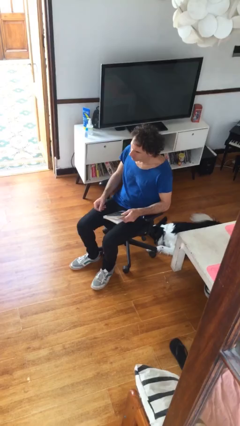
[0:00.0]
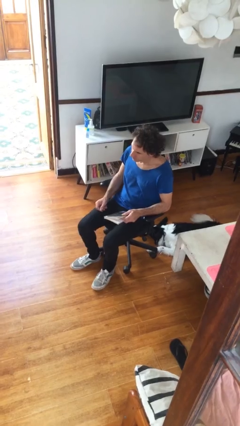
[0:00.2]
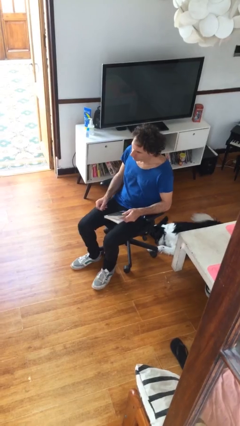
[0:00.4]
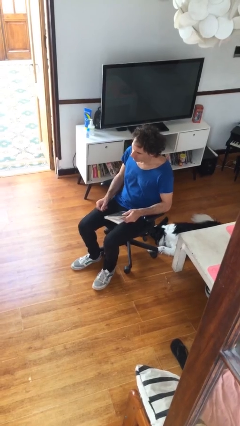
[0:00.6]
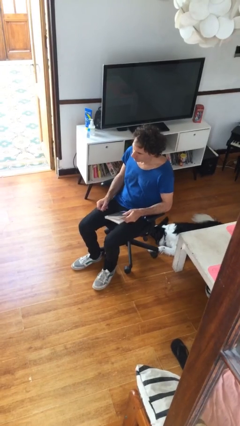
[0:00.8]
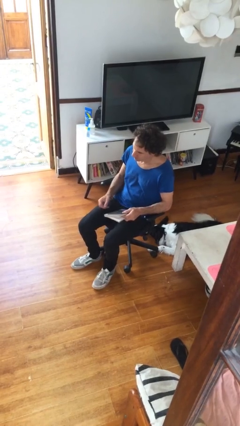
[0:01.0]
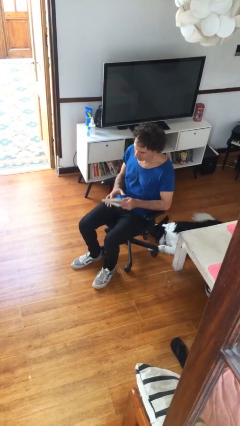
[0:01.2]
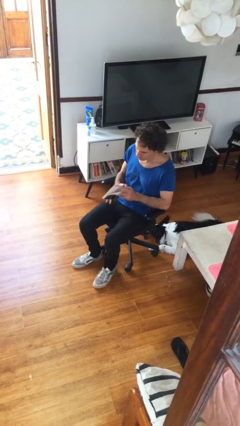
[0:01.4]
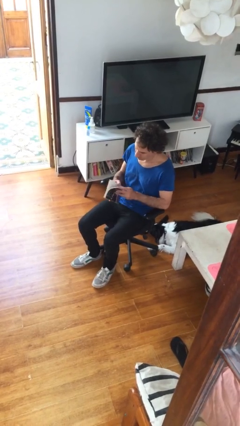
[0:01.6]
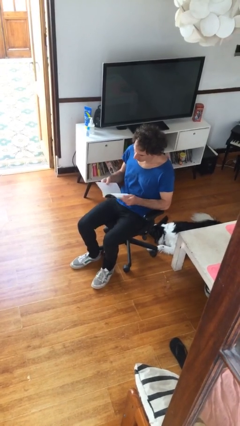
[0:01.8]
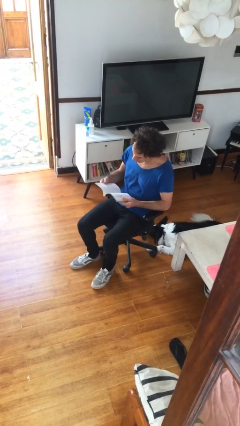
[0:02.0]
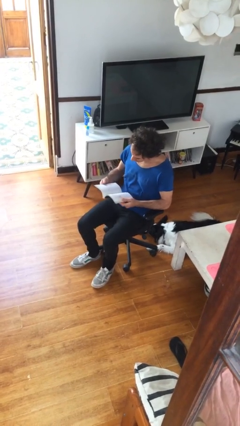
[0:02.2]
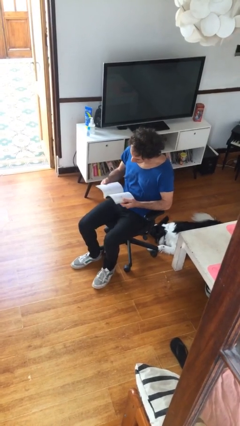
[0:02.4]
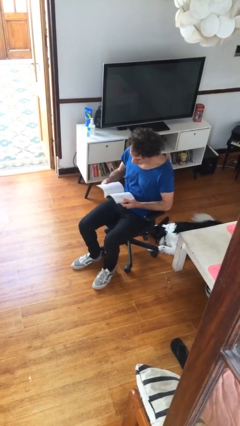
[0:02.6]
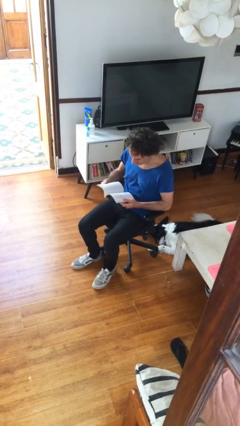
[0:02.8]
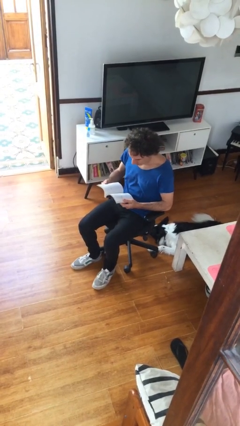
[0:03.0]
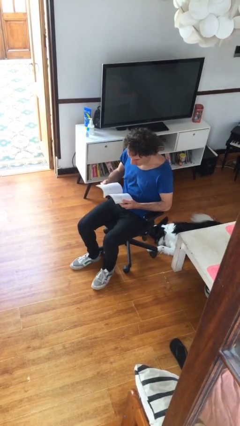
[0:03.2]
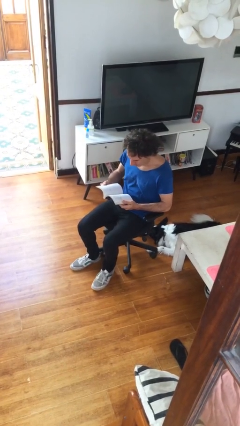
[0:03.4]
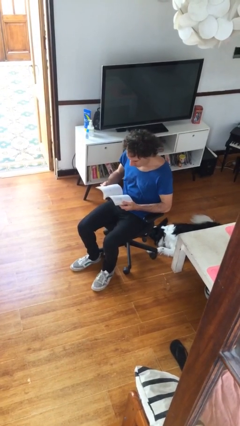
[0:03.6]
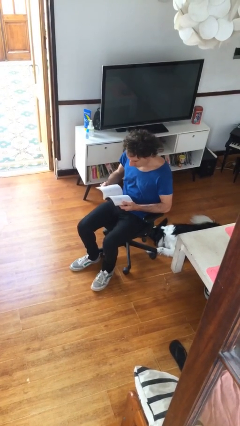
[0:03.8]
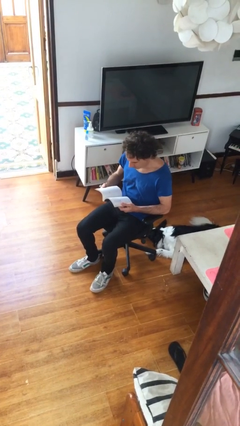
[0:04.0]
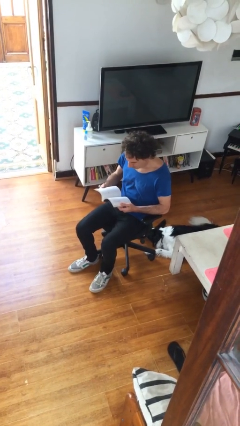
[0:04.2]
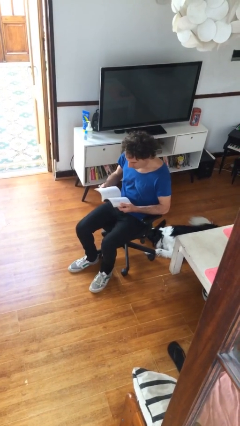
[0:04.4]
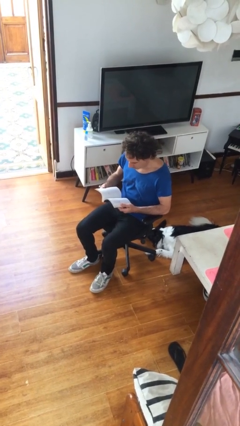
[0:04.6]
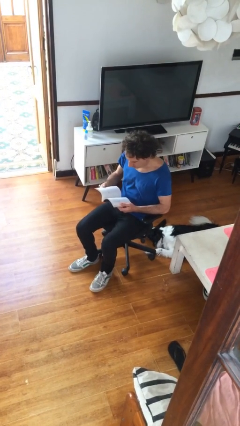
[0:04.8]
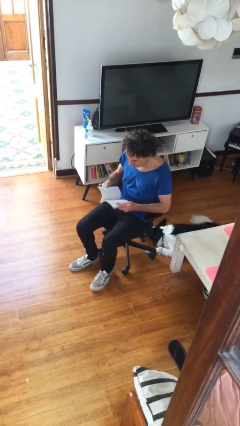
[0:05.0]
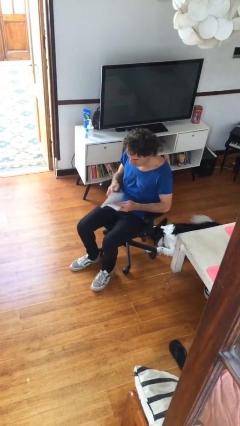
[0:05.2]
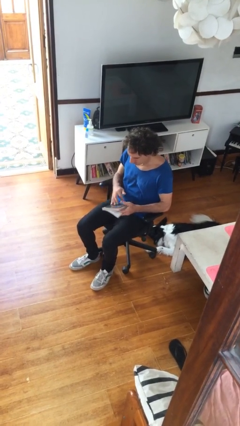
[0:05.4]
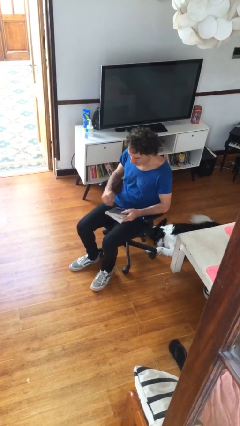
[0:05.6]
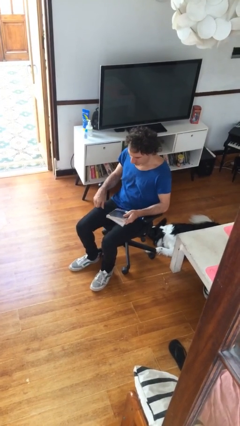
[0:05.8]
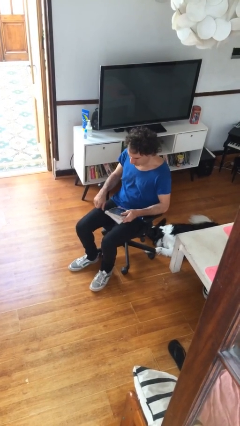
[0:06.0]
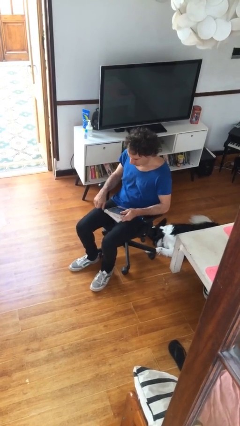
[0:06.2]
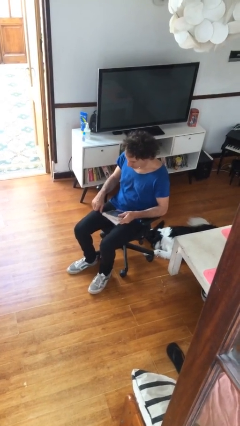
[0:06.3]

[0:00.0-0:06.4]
person reads document

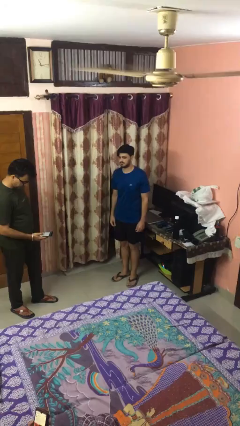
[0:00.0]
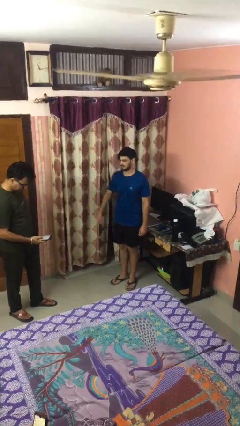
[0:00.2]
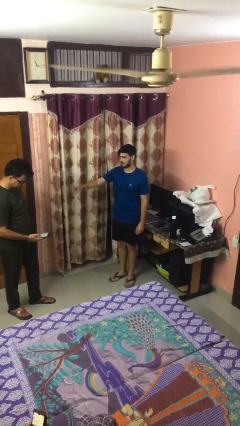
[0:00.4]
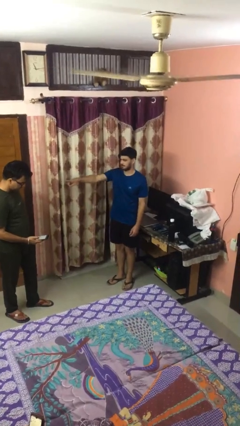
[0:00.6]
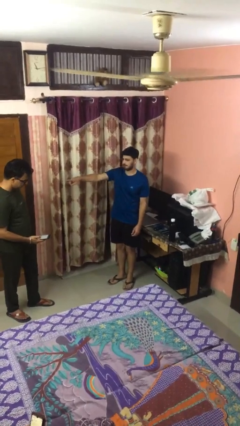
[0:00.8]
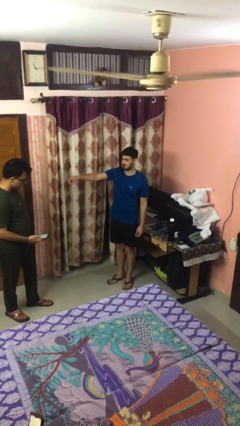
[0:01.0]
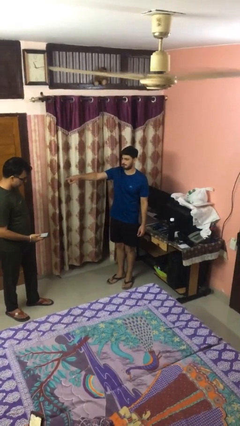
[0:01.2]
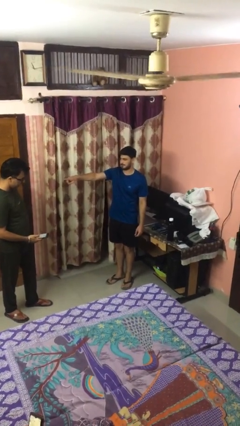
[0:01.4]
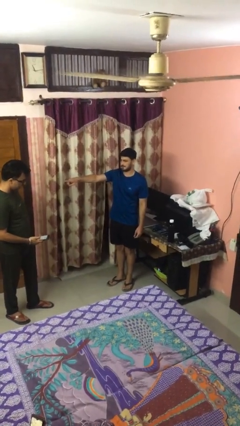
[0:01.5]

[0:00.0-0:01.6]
person points at person

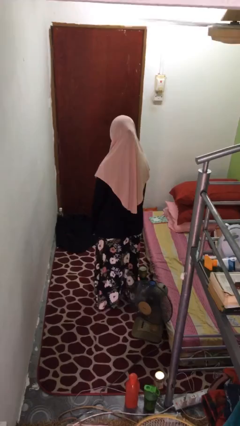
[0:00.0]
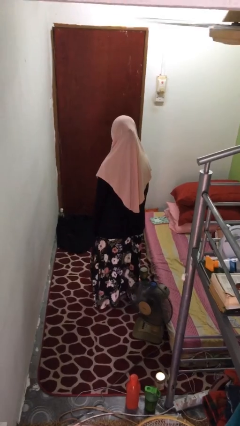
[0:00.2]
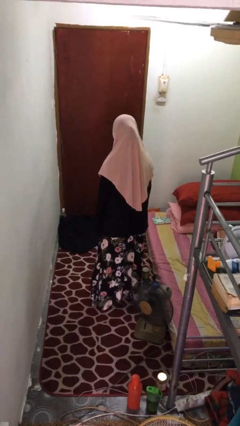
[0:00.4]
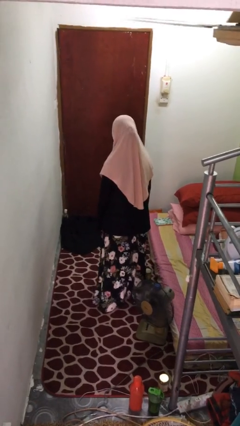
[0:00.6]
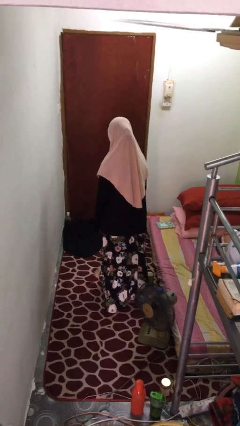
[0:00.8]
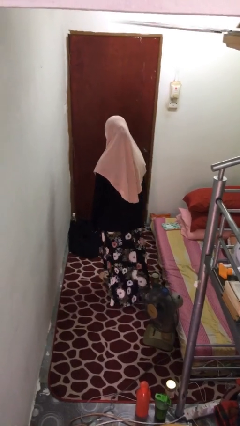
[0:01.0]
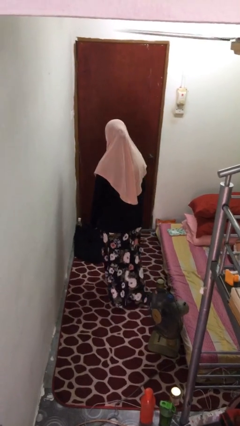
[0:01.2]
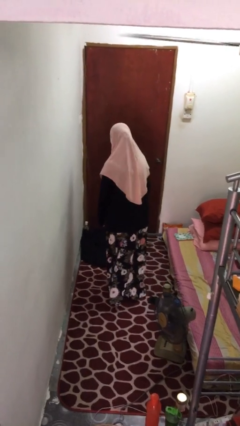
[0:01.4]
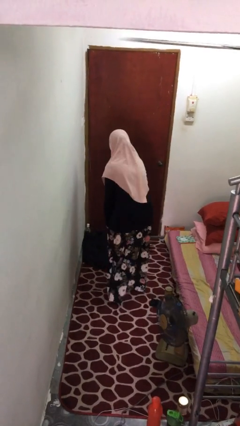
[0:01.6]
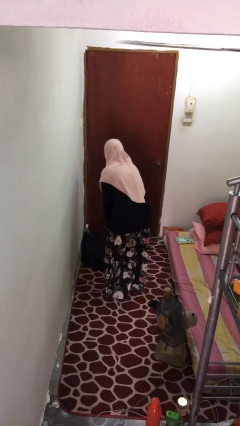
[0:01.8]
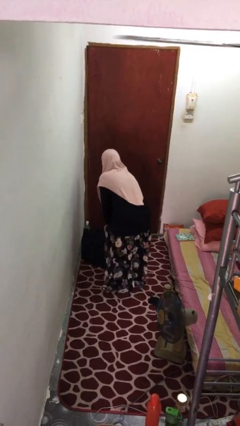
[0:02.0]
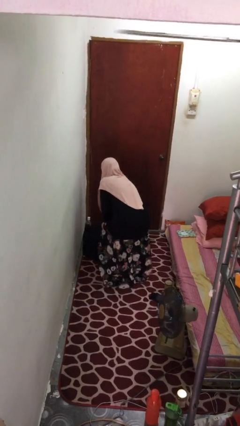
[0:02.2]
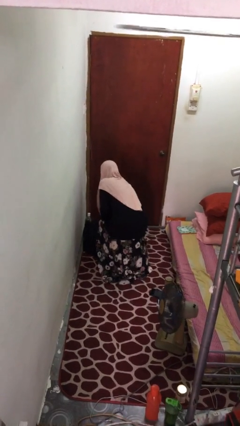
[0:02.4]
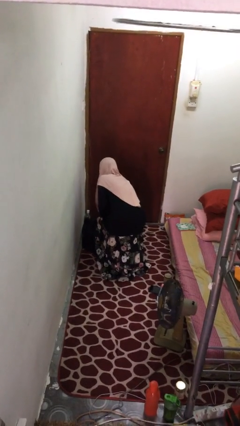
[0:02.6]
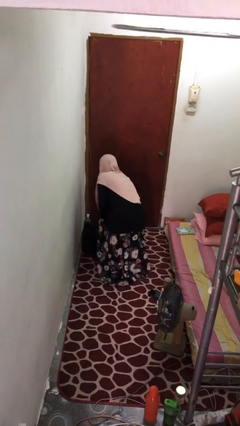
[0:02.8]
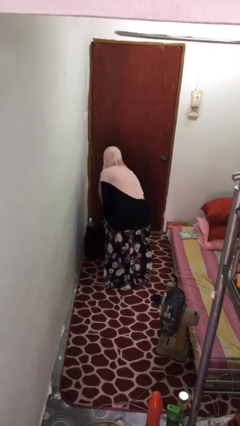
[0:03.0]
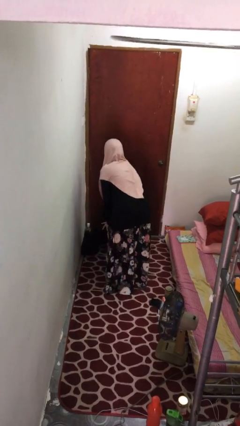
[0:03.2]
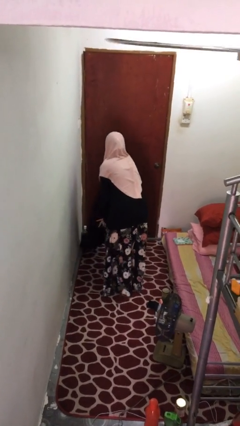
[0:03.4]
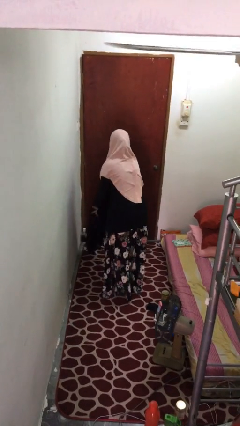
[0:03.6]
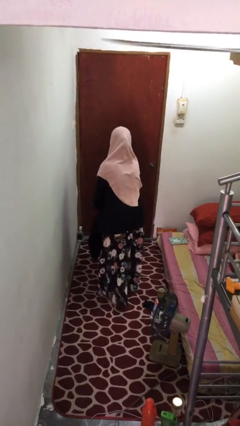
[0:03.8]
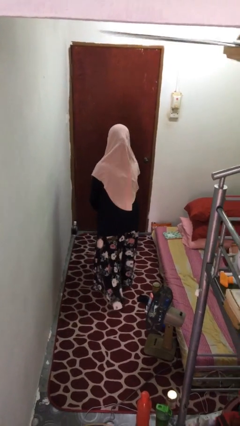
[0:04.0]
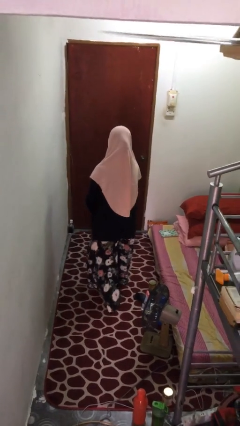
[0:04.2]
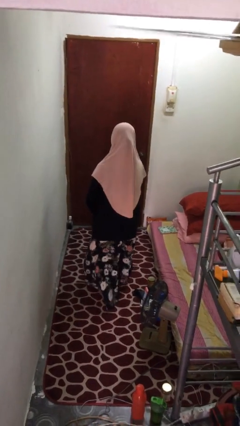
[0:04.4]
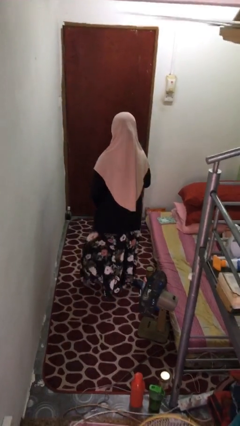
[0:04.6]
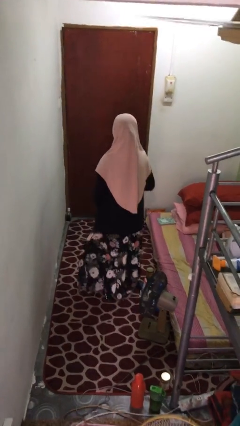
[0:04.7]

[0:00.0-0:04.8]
person picks up object from floor

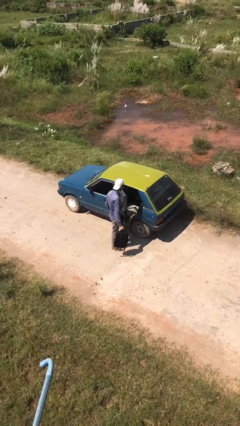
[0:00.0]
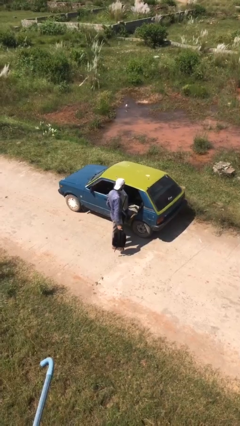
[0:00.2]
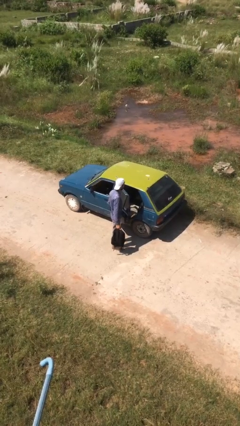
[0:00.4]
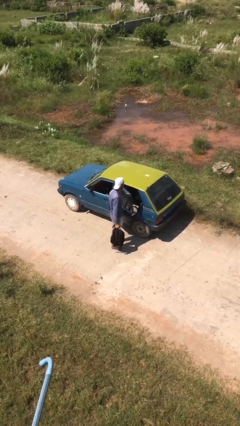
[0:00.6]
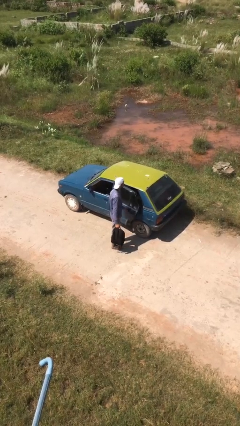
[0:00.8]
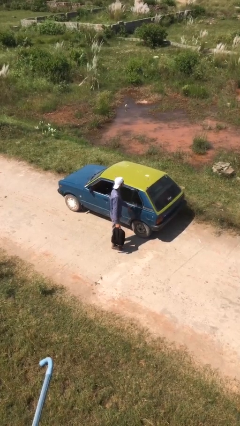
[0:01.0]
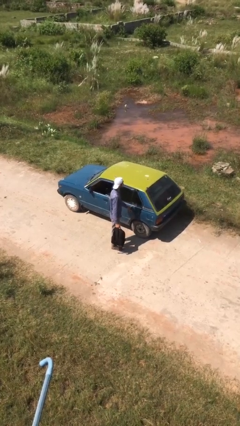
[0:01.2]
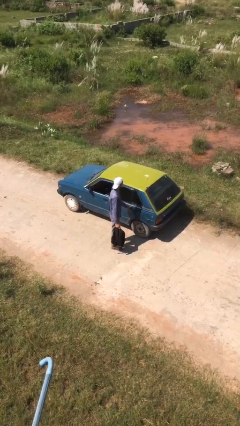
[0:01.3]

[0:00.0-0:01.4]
person closes car door

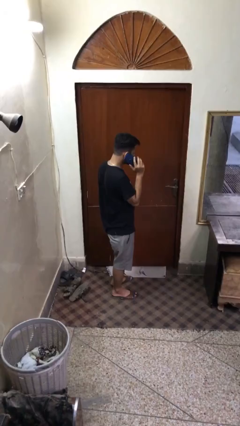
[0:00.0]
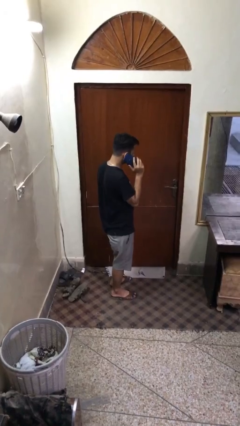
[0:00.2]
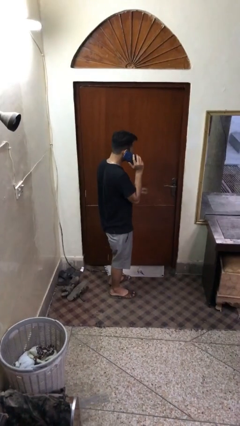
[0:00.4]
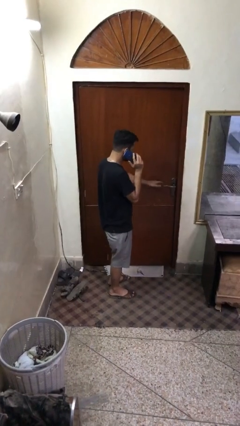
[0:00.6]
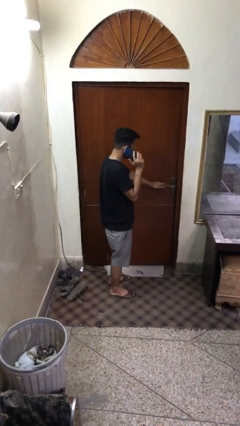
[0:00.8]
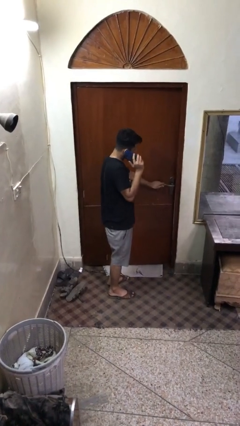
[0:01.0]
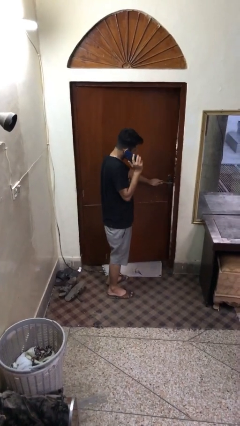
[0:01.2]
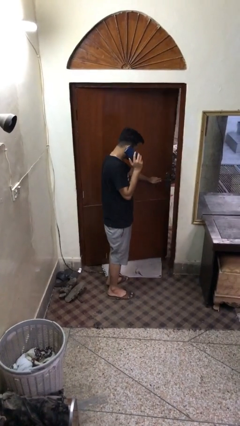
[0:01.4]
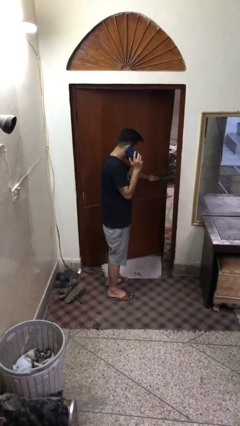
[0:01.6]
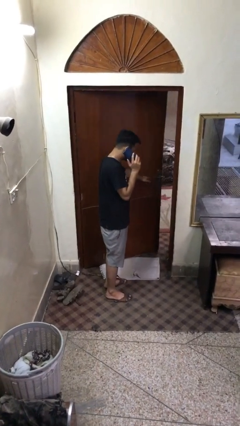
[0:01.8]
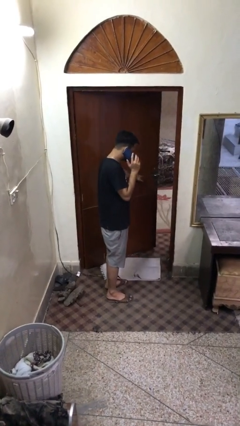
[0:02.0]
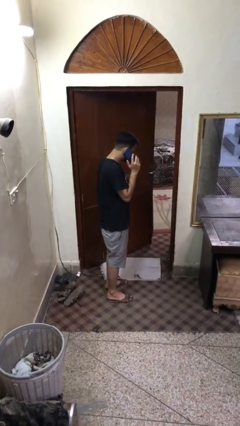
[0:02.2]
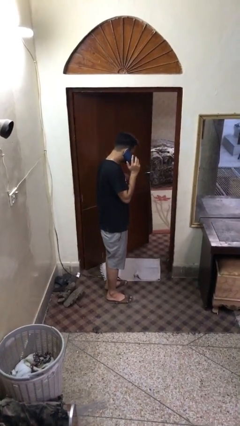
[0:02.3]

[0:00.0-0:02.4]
person opens facility door

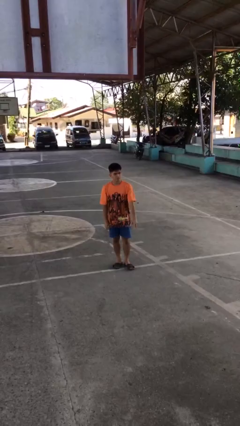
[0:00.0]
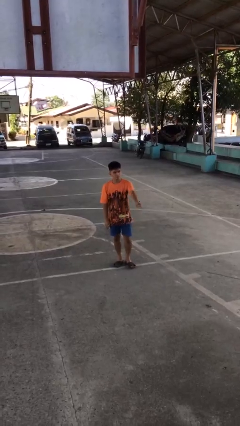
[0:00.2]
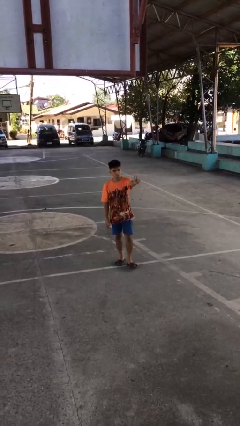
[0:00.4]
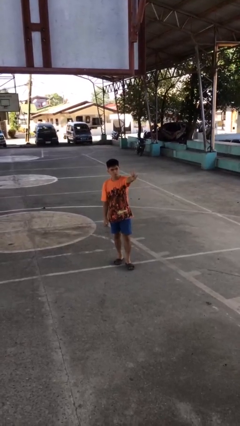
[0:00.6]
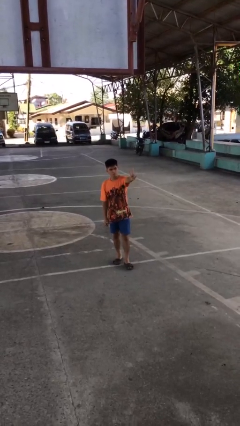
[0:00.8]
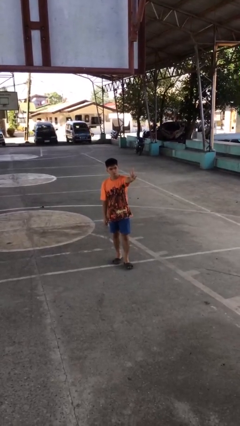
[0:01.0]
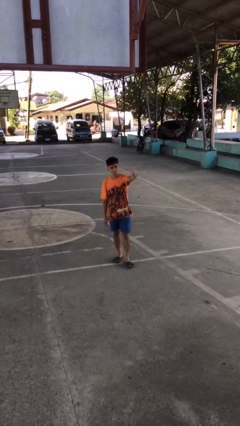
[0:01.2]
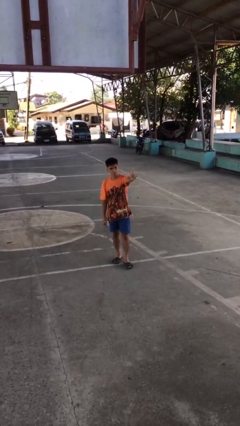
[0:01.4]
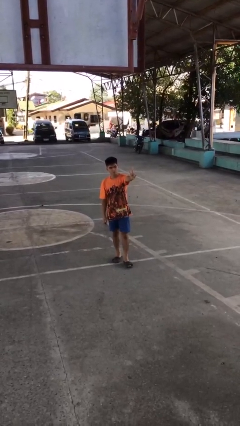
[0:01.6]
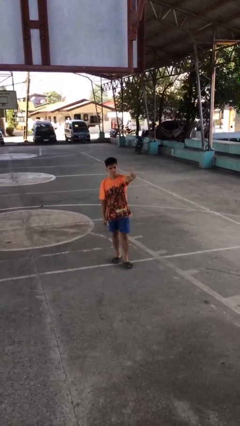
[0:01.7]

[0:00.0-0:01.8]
person gestures peace
